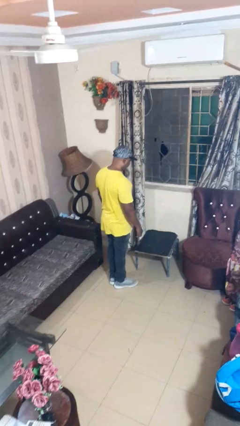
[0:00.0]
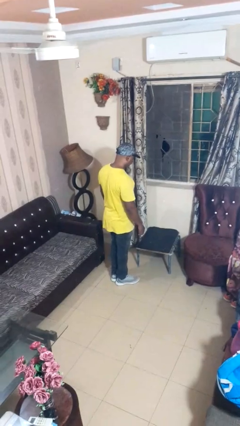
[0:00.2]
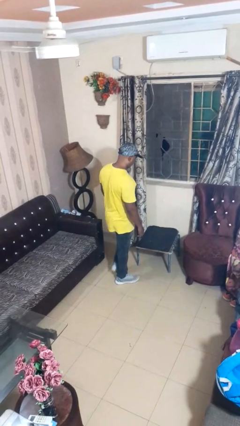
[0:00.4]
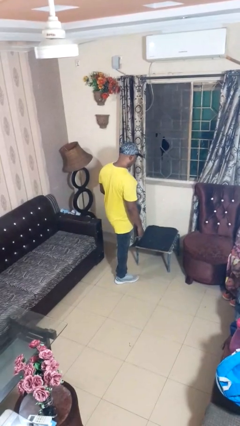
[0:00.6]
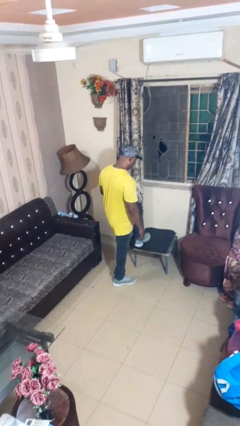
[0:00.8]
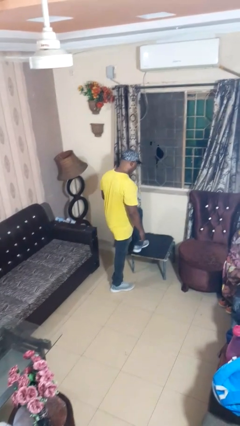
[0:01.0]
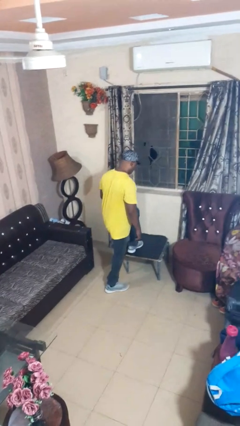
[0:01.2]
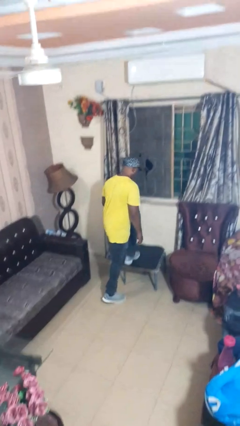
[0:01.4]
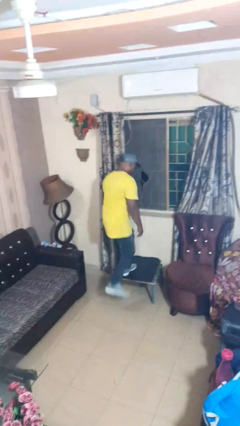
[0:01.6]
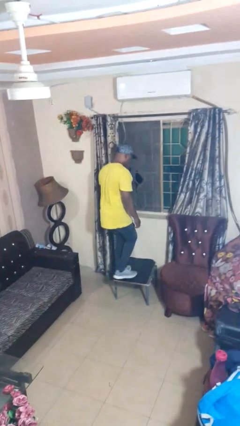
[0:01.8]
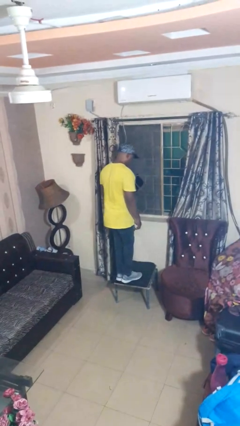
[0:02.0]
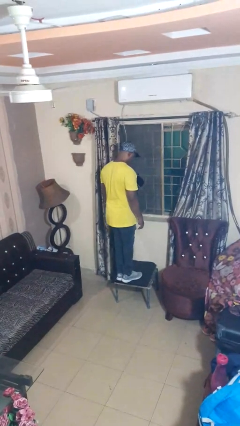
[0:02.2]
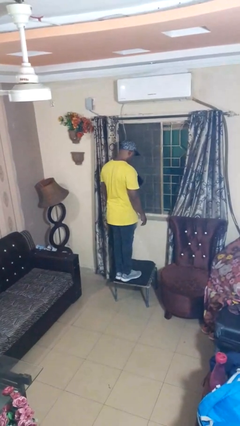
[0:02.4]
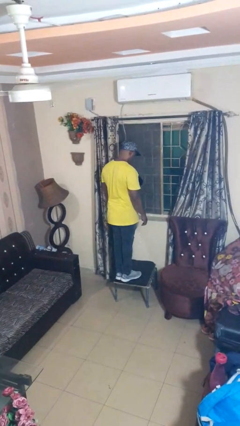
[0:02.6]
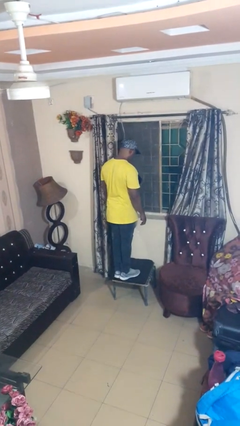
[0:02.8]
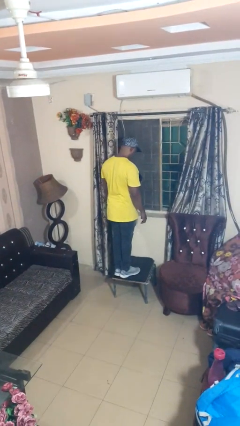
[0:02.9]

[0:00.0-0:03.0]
person climbs on table

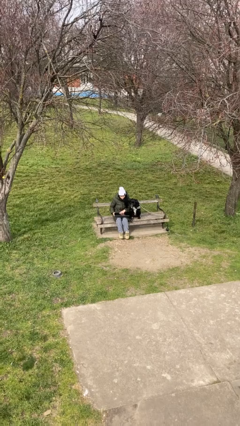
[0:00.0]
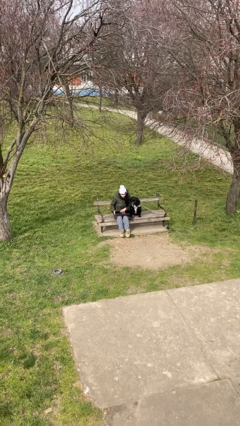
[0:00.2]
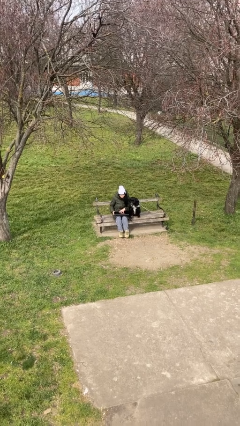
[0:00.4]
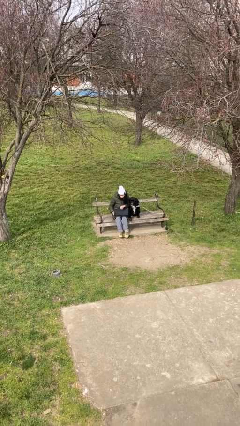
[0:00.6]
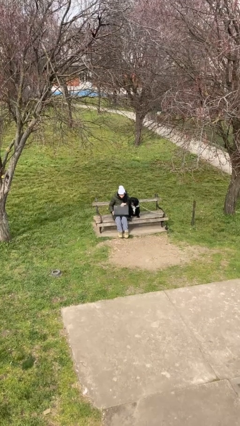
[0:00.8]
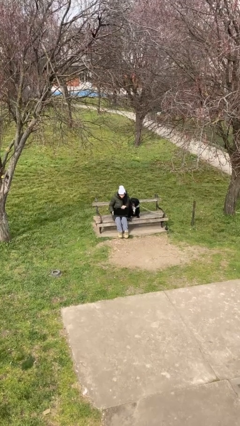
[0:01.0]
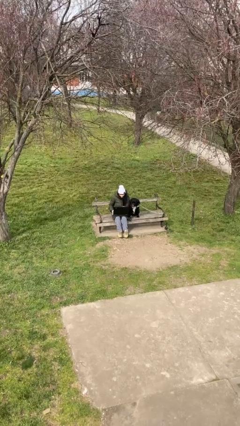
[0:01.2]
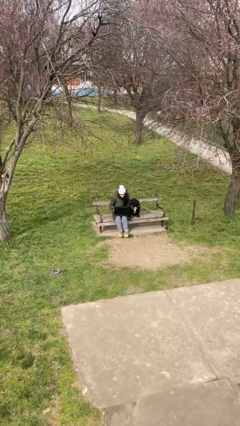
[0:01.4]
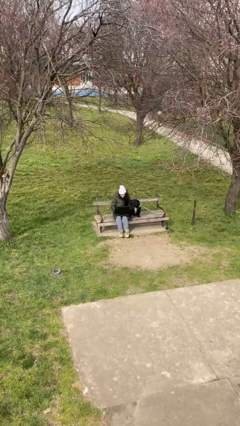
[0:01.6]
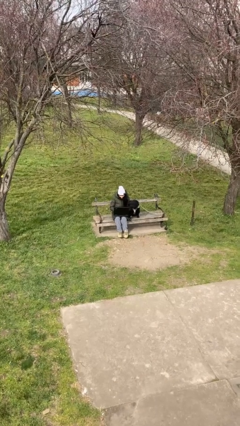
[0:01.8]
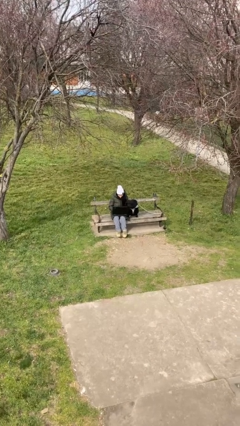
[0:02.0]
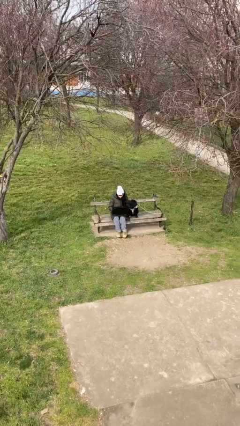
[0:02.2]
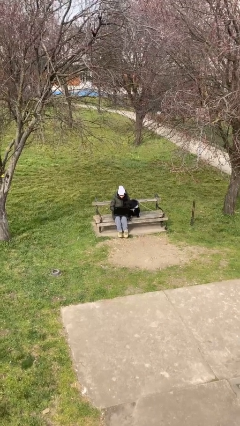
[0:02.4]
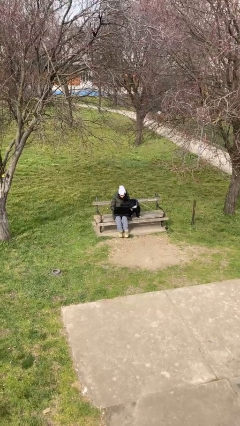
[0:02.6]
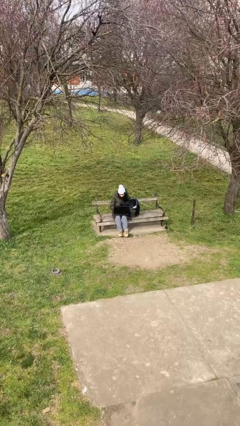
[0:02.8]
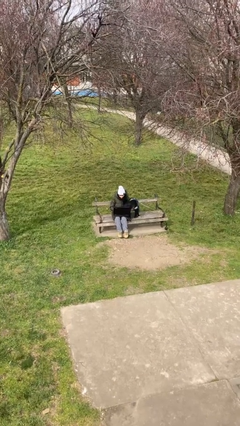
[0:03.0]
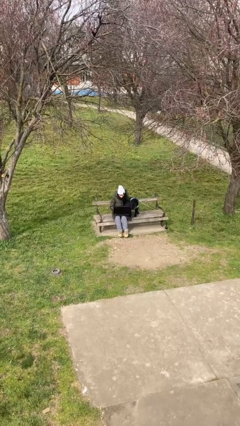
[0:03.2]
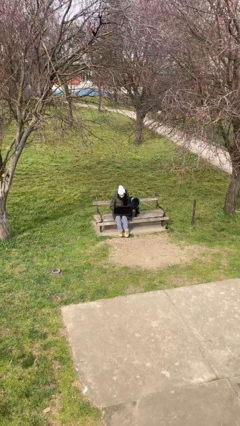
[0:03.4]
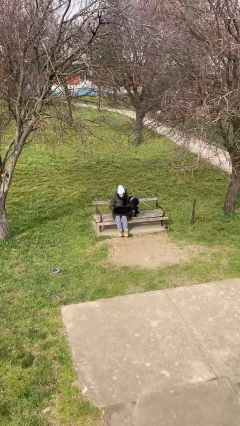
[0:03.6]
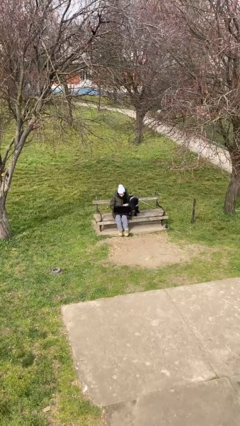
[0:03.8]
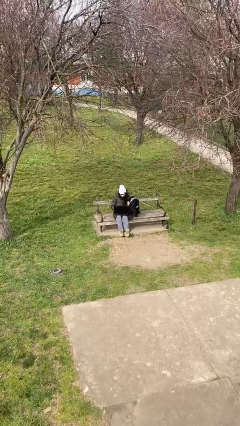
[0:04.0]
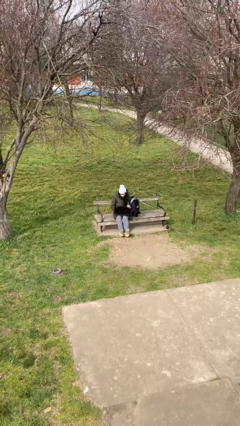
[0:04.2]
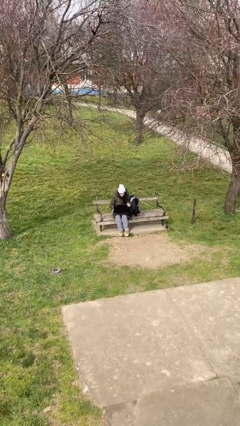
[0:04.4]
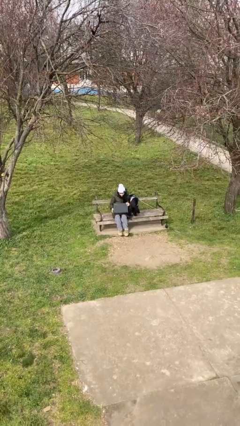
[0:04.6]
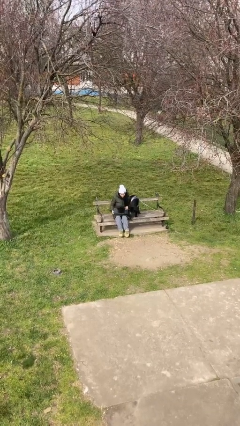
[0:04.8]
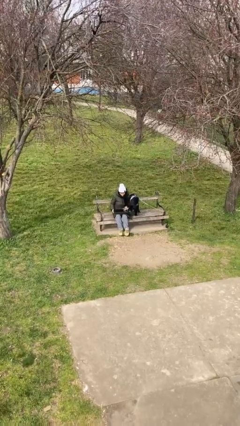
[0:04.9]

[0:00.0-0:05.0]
person interacts with laptop

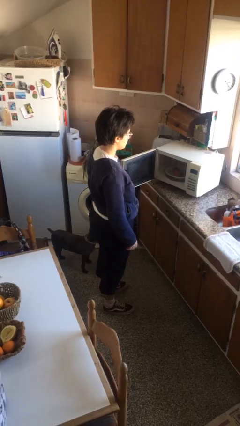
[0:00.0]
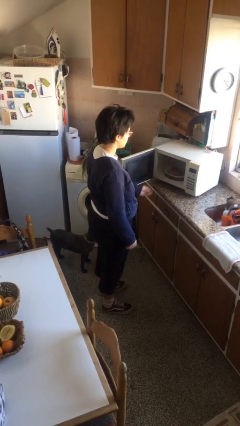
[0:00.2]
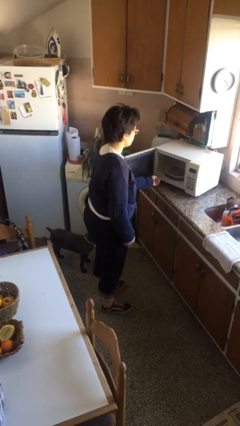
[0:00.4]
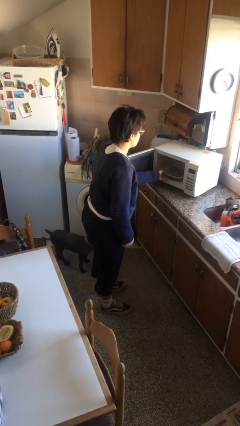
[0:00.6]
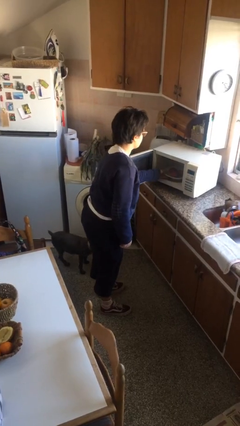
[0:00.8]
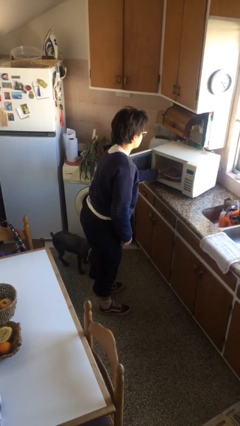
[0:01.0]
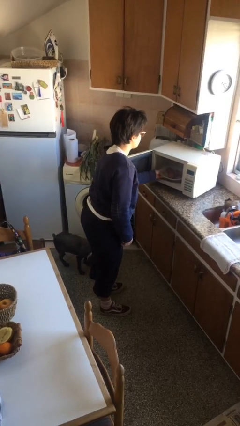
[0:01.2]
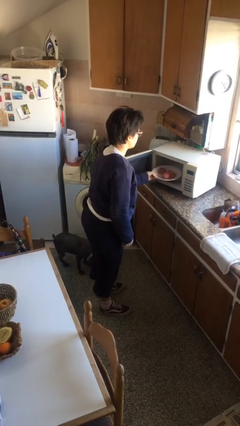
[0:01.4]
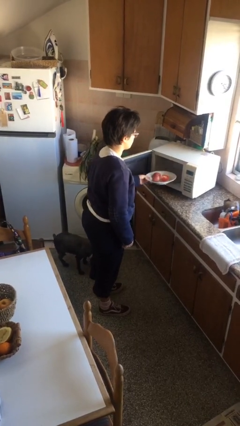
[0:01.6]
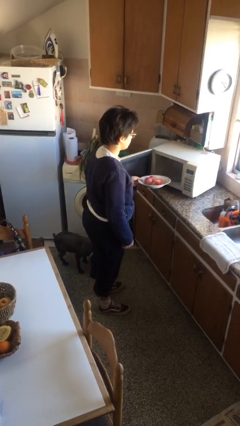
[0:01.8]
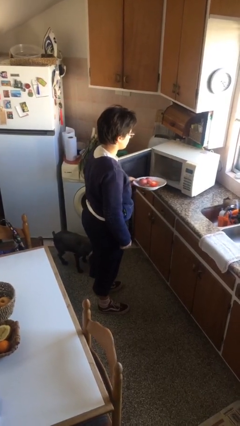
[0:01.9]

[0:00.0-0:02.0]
person takes object from microwave

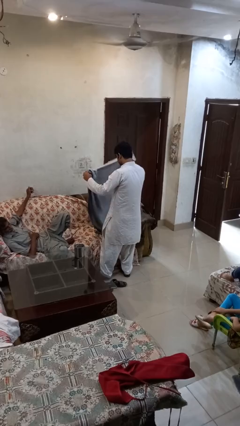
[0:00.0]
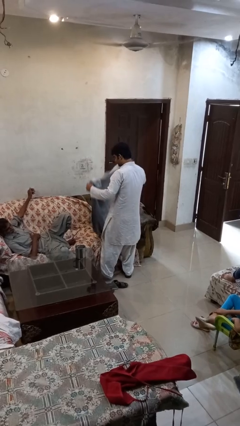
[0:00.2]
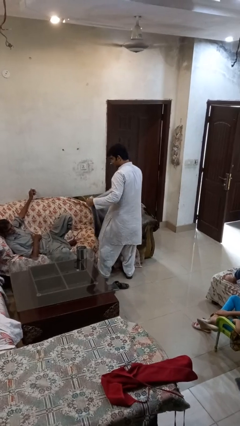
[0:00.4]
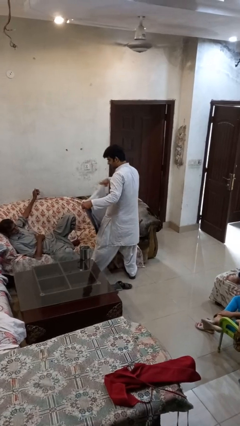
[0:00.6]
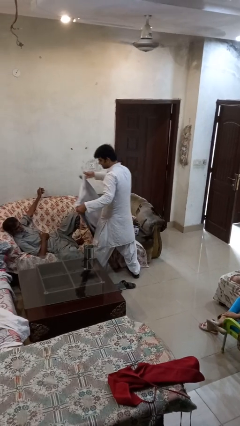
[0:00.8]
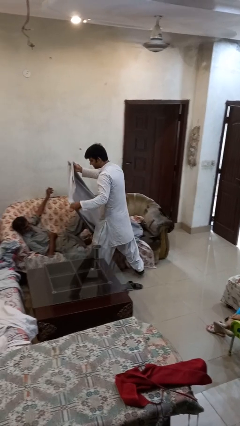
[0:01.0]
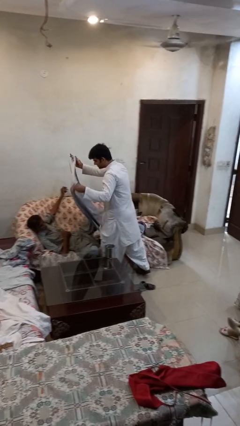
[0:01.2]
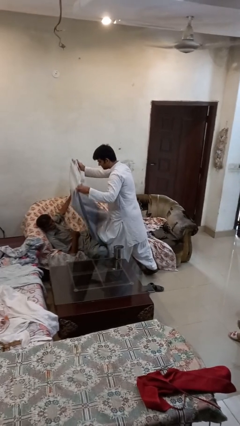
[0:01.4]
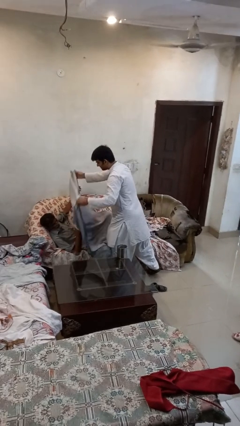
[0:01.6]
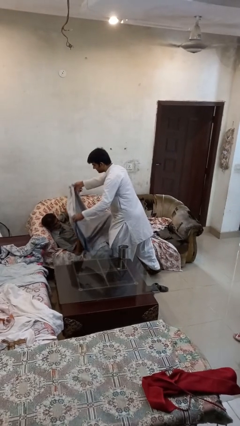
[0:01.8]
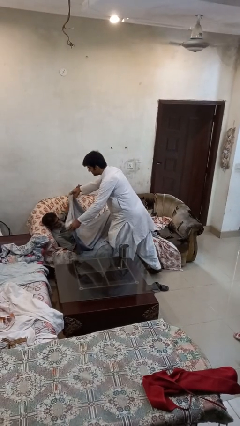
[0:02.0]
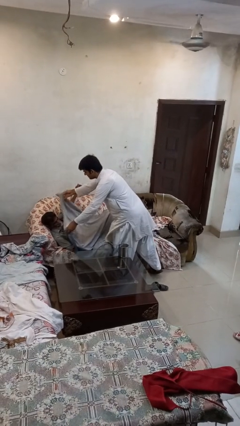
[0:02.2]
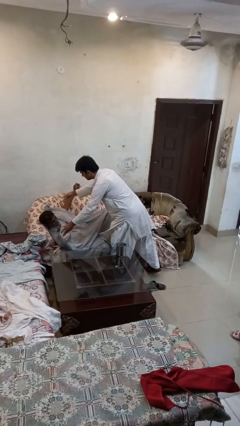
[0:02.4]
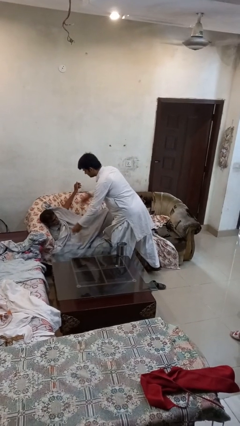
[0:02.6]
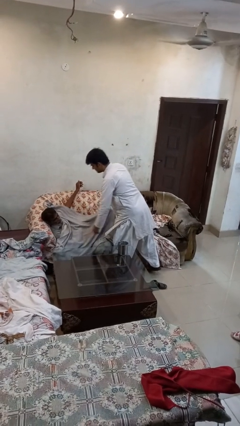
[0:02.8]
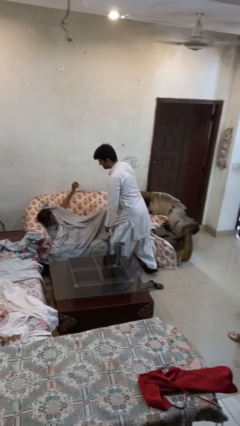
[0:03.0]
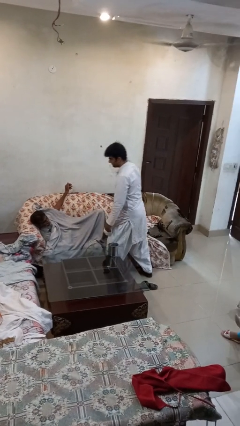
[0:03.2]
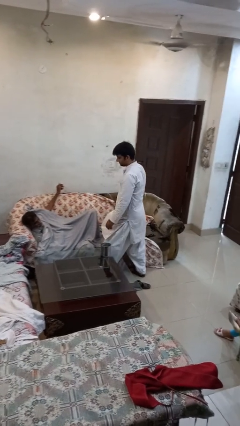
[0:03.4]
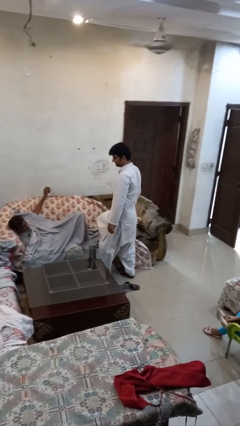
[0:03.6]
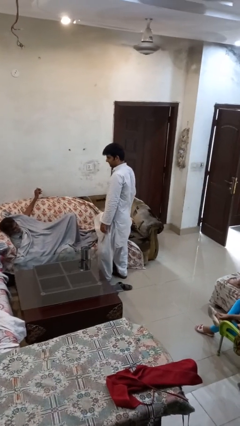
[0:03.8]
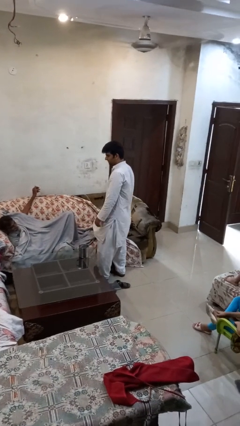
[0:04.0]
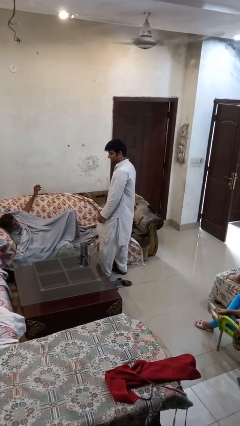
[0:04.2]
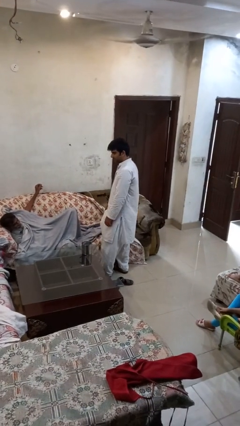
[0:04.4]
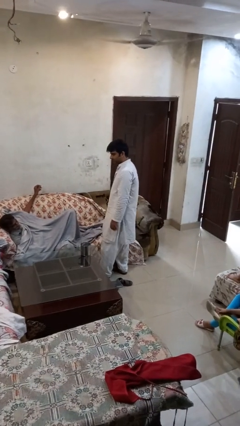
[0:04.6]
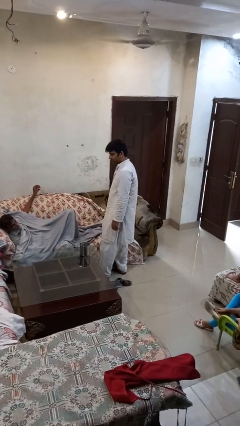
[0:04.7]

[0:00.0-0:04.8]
person covers friend with blanket

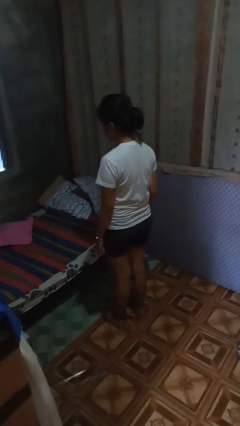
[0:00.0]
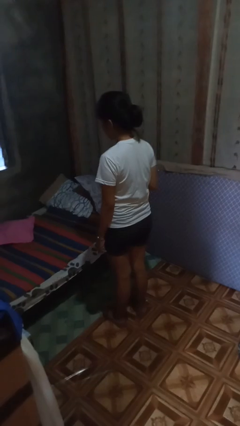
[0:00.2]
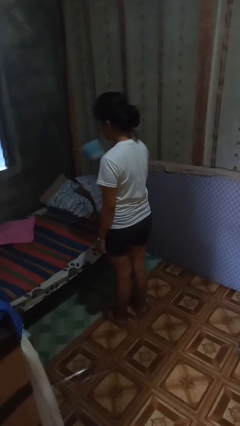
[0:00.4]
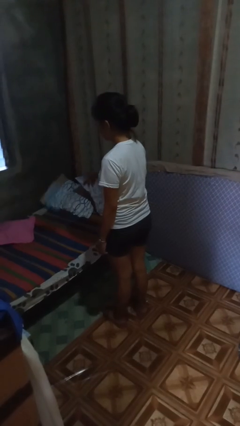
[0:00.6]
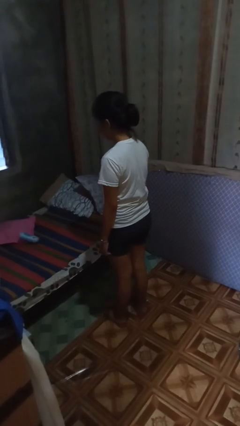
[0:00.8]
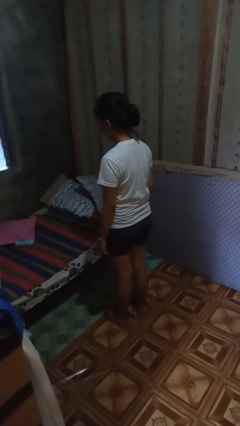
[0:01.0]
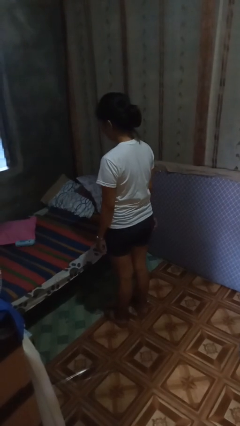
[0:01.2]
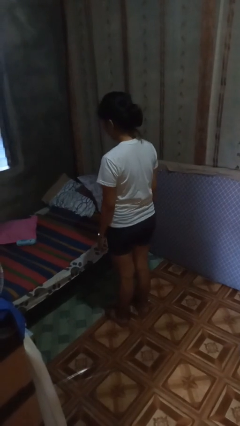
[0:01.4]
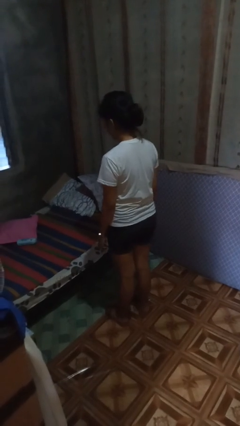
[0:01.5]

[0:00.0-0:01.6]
person throws object on bed

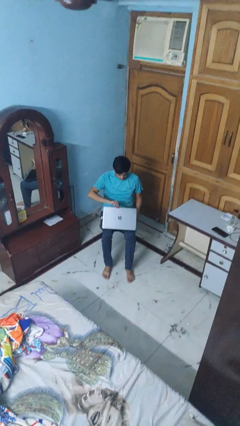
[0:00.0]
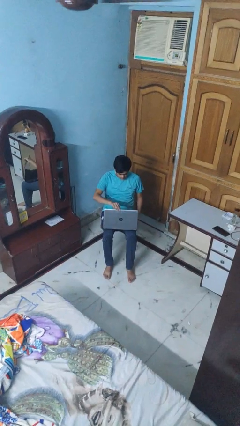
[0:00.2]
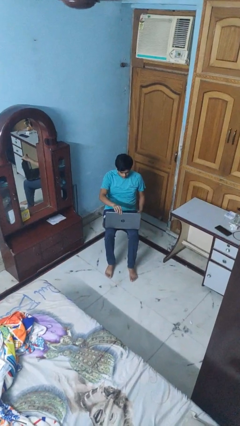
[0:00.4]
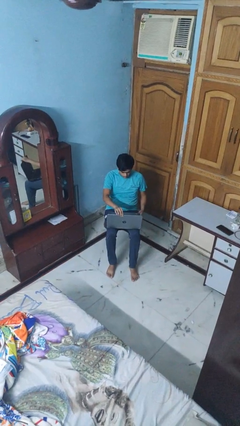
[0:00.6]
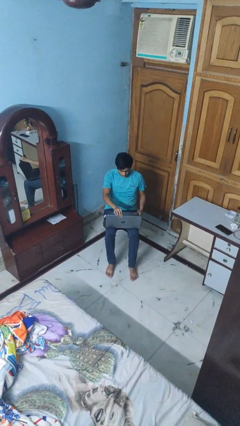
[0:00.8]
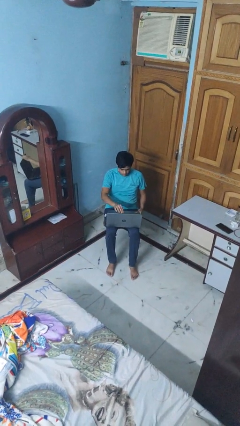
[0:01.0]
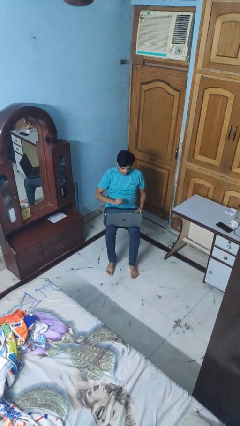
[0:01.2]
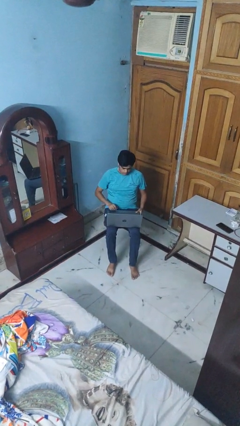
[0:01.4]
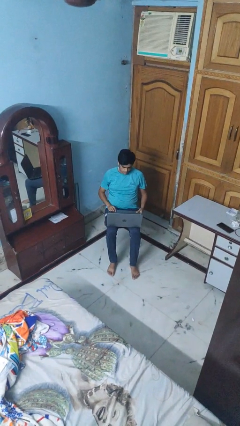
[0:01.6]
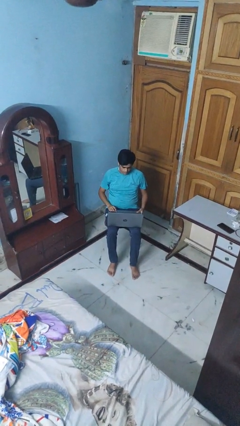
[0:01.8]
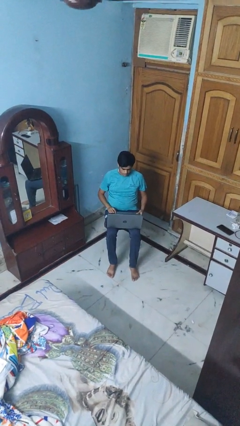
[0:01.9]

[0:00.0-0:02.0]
person opens laptop
